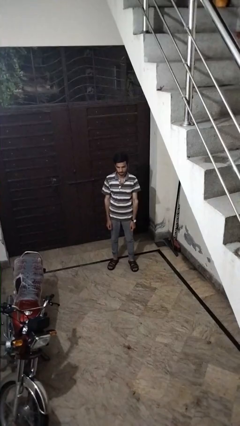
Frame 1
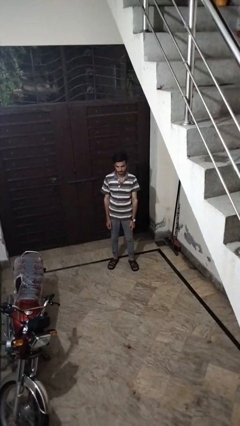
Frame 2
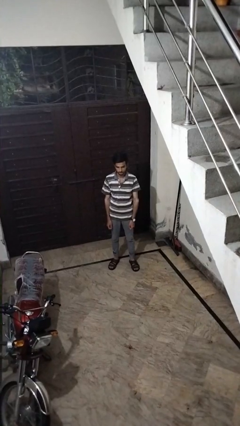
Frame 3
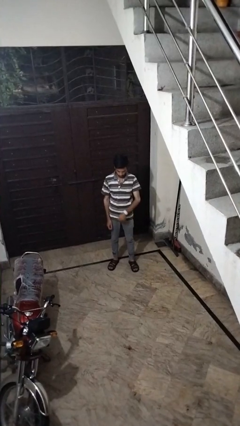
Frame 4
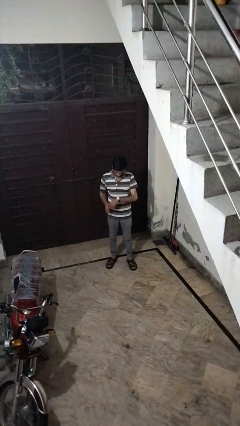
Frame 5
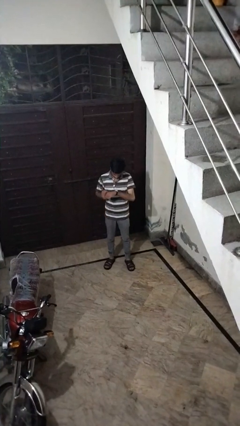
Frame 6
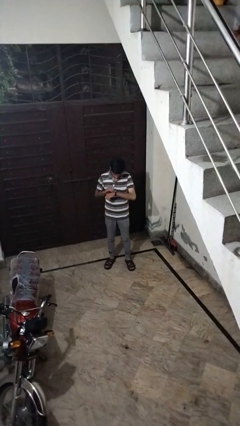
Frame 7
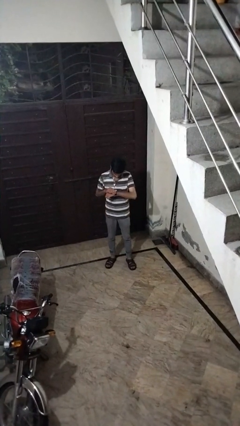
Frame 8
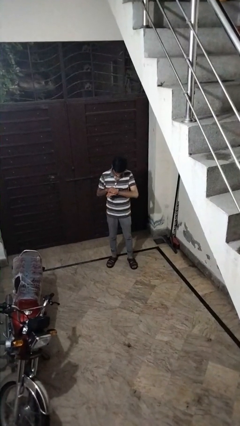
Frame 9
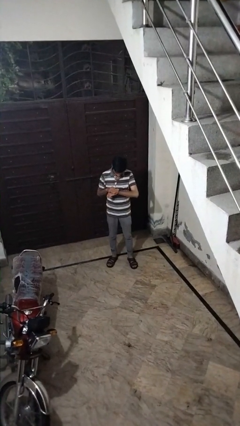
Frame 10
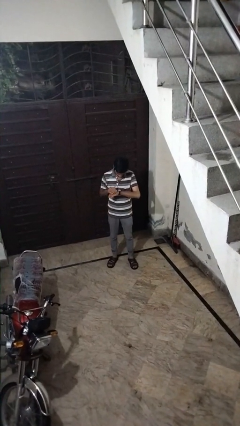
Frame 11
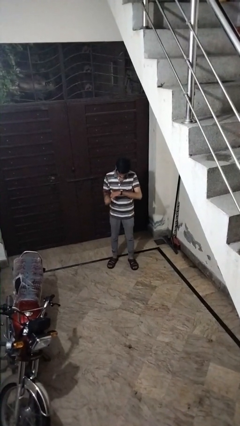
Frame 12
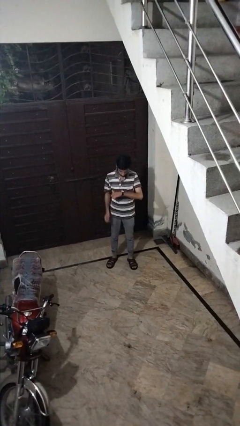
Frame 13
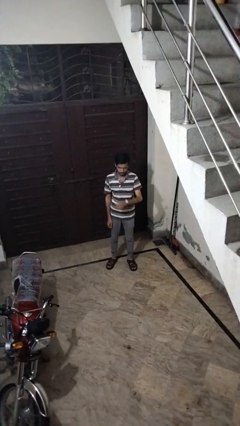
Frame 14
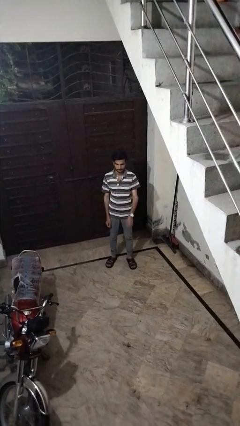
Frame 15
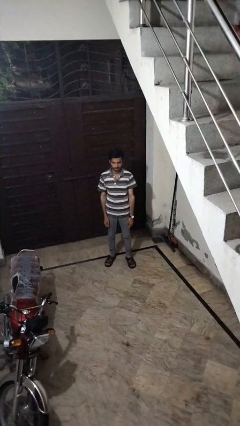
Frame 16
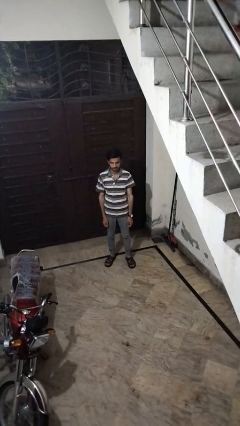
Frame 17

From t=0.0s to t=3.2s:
person looks at wristwatch

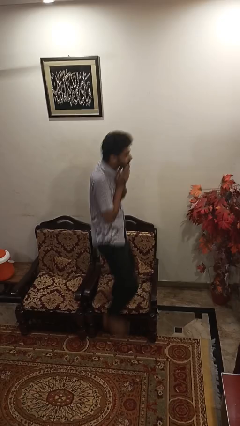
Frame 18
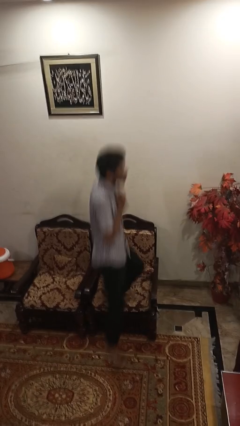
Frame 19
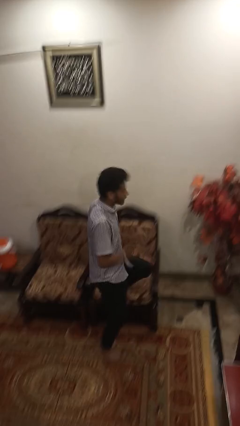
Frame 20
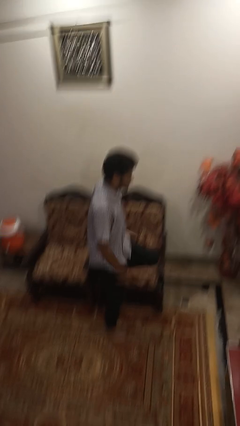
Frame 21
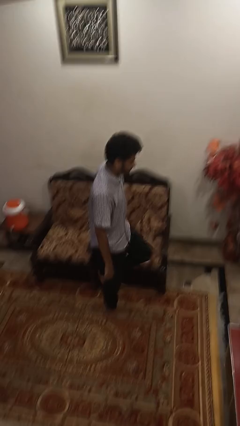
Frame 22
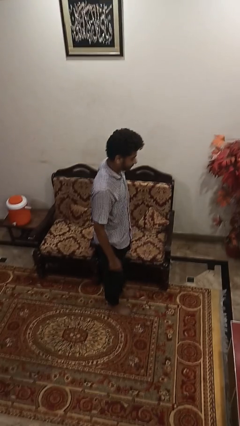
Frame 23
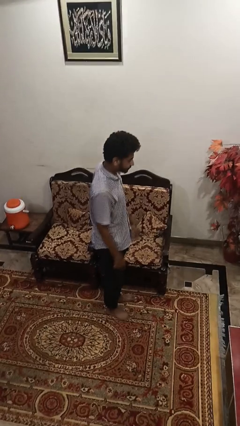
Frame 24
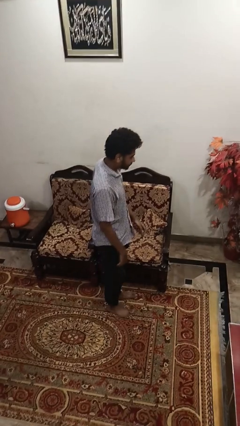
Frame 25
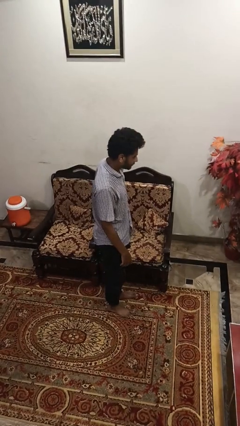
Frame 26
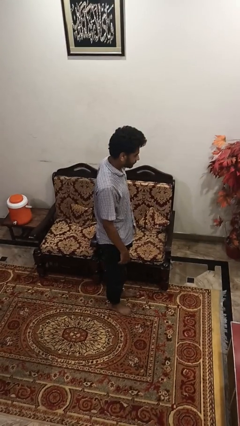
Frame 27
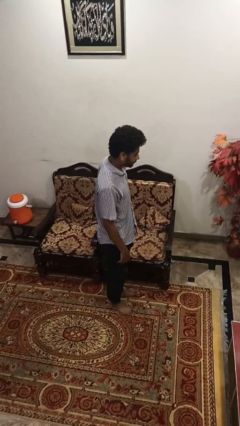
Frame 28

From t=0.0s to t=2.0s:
person climbs off couch

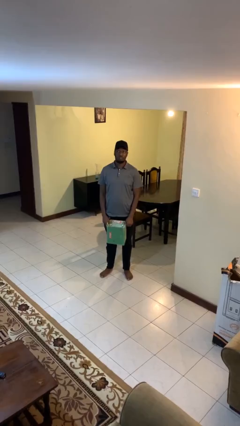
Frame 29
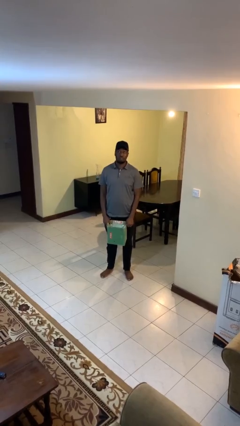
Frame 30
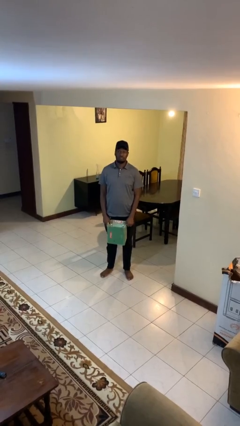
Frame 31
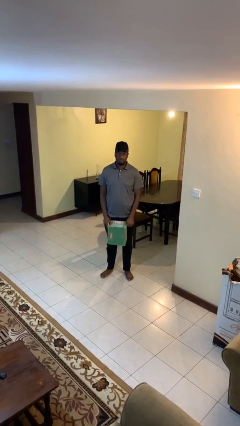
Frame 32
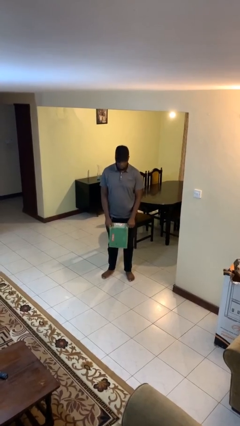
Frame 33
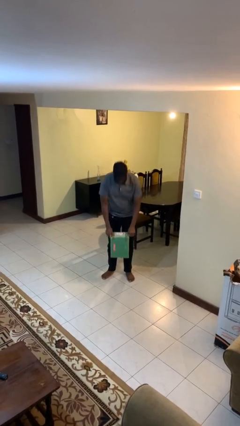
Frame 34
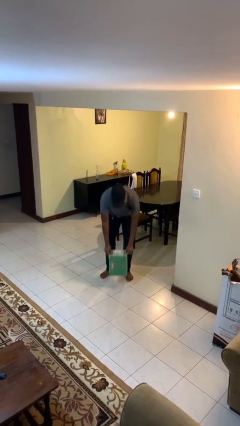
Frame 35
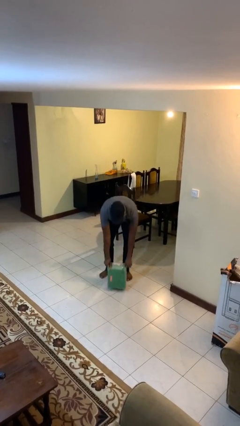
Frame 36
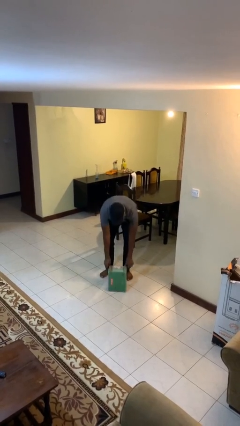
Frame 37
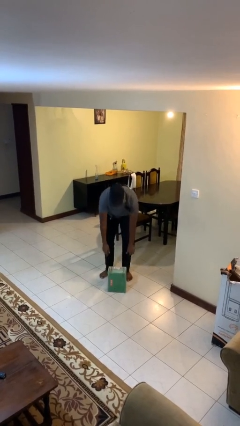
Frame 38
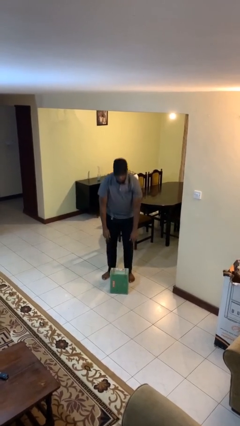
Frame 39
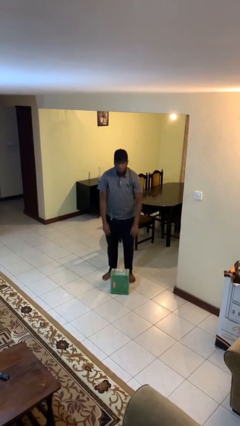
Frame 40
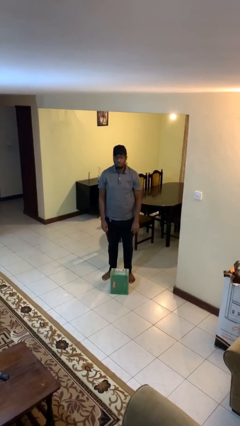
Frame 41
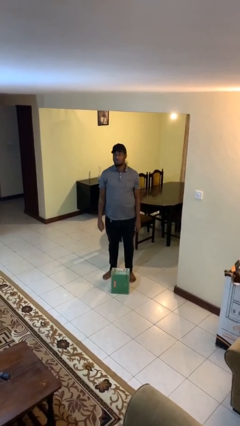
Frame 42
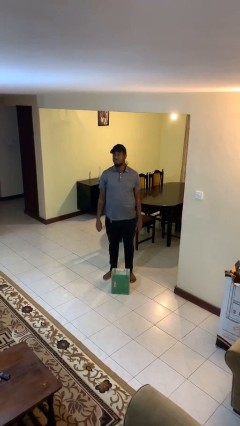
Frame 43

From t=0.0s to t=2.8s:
person puts down object on floor

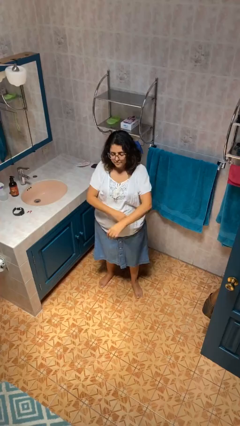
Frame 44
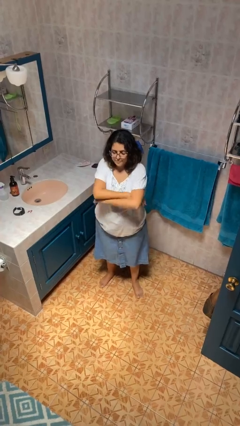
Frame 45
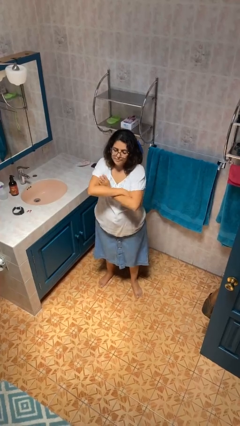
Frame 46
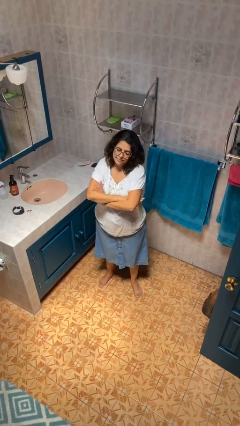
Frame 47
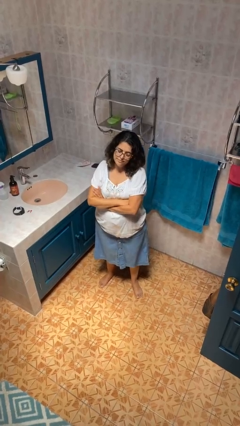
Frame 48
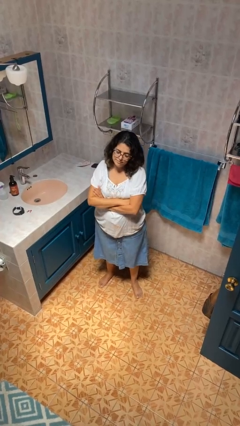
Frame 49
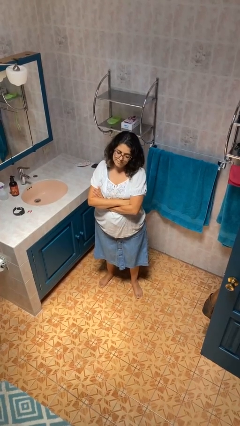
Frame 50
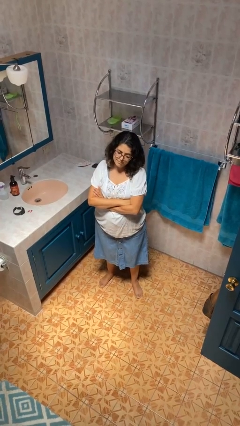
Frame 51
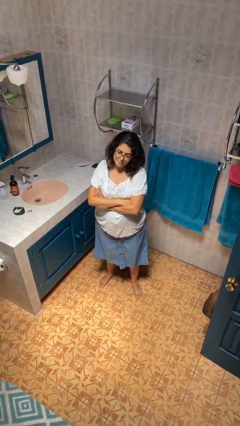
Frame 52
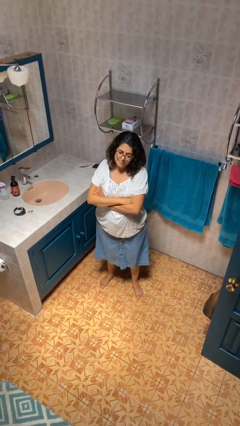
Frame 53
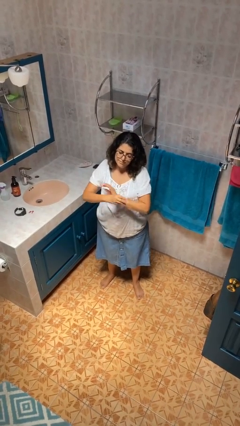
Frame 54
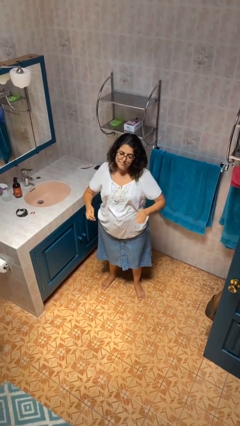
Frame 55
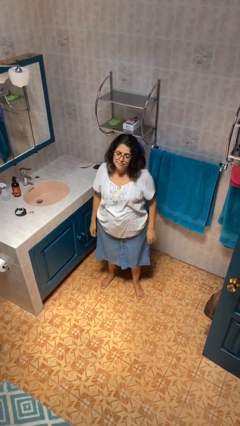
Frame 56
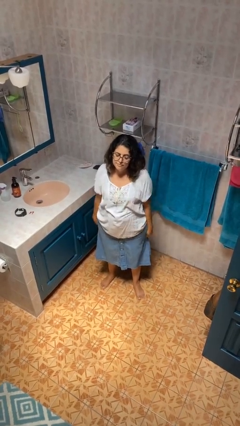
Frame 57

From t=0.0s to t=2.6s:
person crosses arms

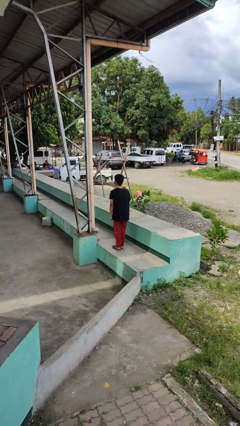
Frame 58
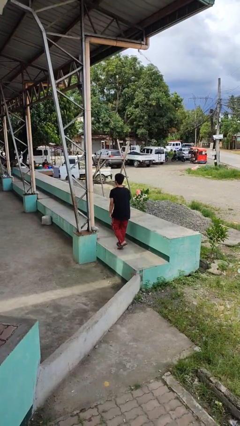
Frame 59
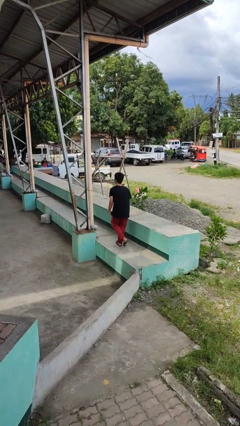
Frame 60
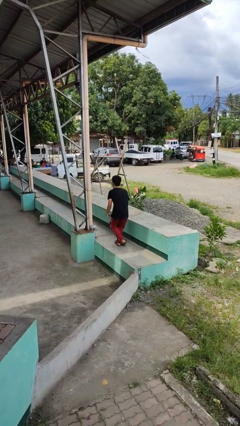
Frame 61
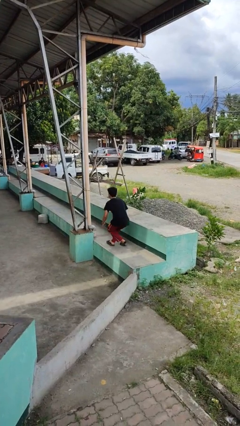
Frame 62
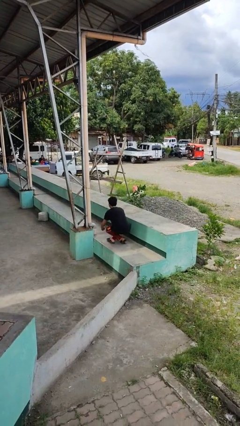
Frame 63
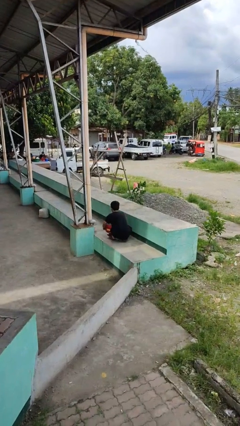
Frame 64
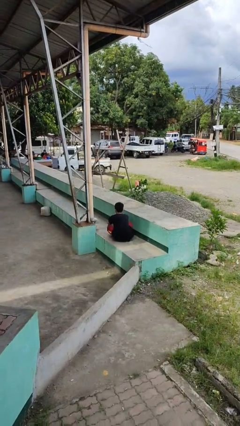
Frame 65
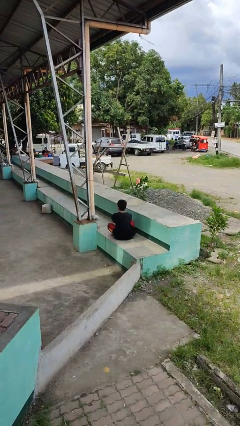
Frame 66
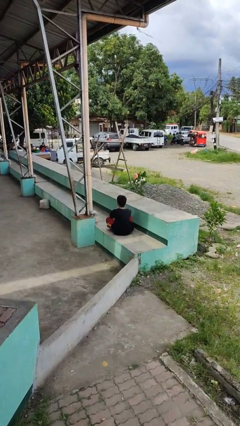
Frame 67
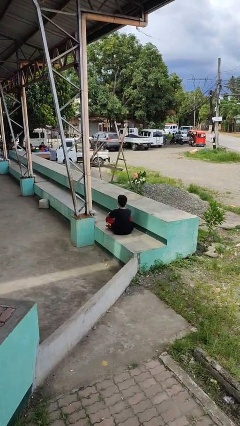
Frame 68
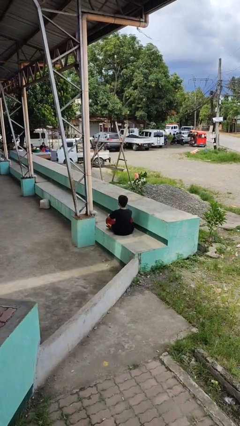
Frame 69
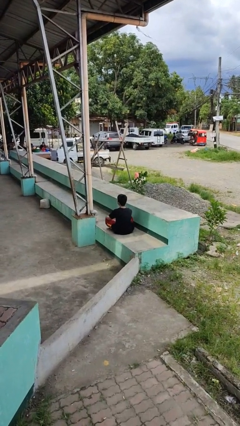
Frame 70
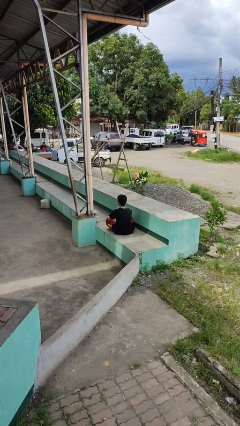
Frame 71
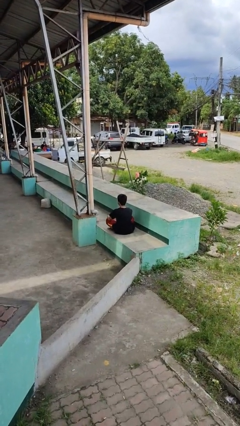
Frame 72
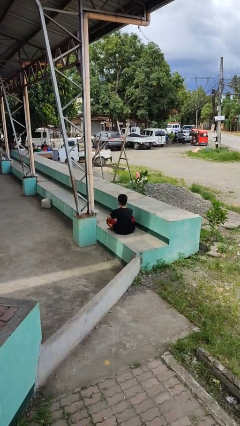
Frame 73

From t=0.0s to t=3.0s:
person sits crisscross

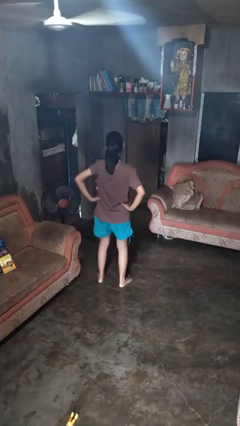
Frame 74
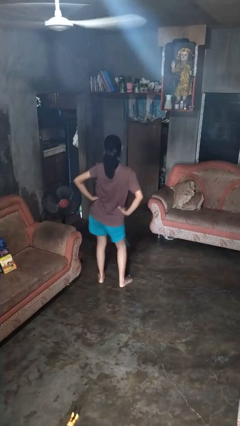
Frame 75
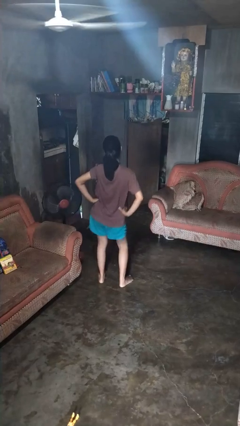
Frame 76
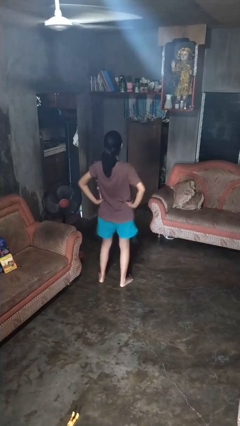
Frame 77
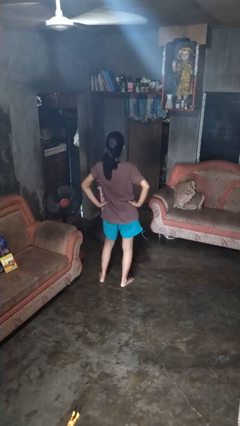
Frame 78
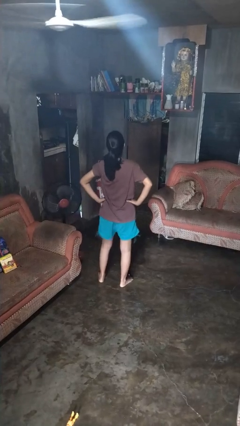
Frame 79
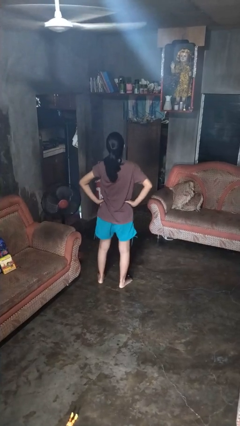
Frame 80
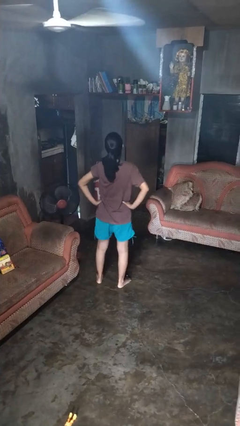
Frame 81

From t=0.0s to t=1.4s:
person dances in place

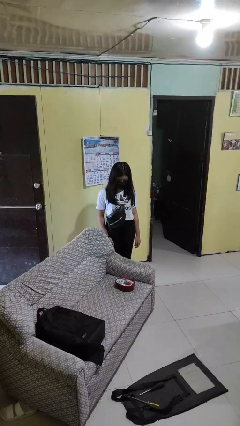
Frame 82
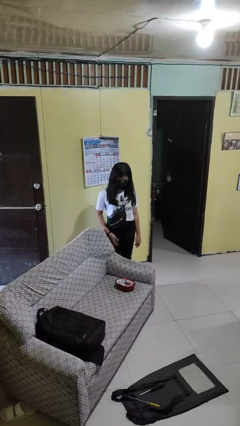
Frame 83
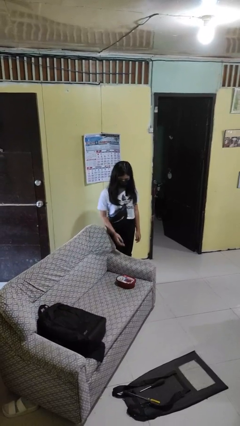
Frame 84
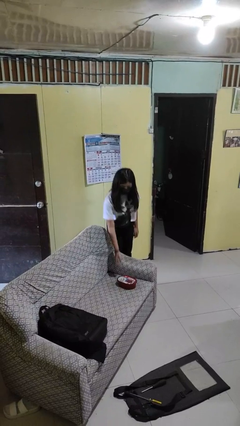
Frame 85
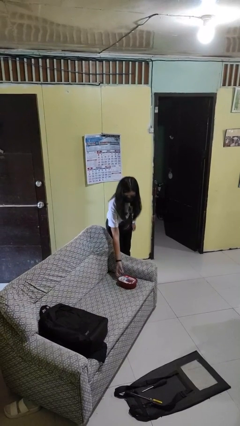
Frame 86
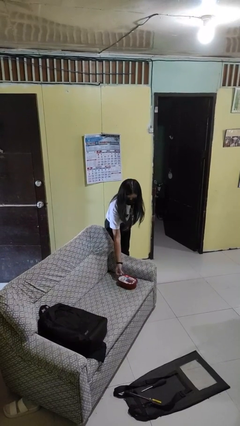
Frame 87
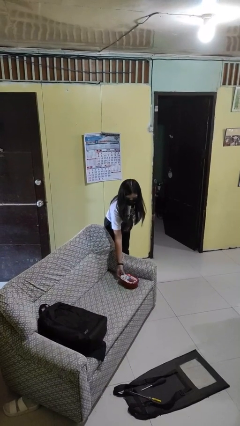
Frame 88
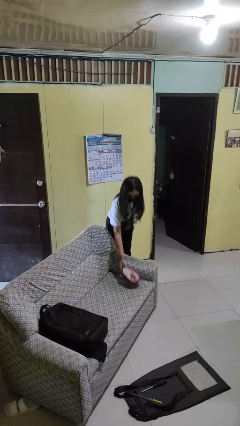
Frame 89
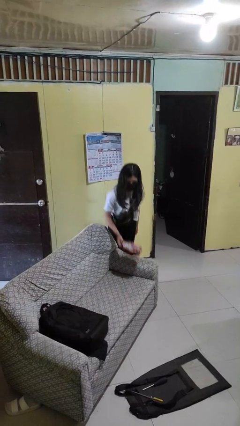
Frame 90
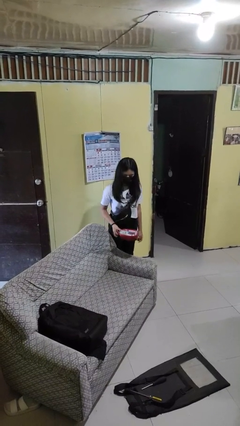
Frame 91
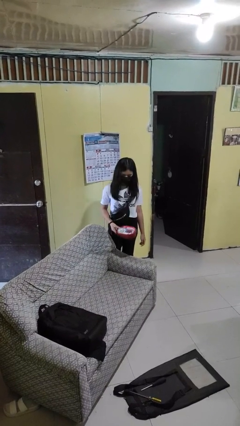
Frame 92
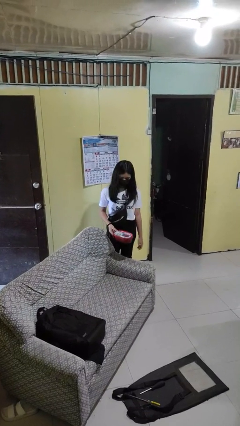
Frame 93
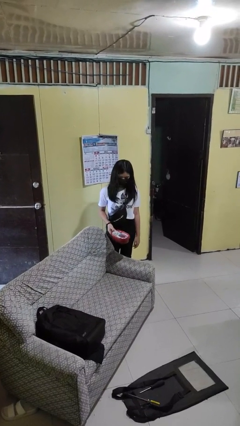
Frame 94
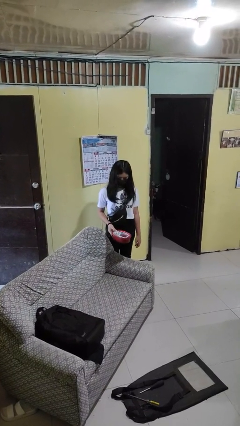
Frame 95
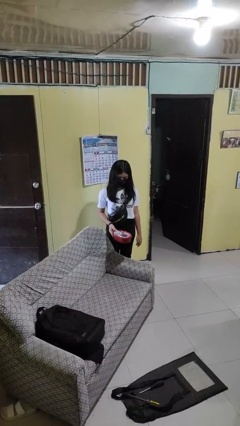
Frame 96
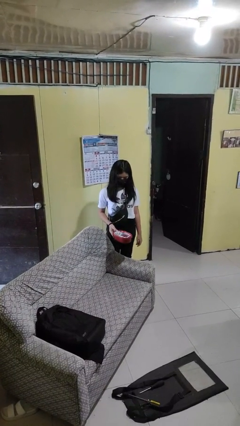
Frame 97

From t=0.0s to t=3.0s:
person picks up object from couch
